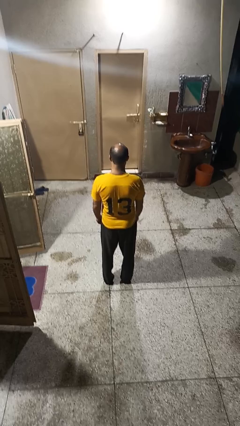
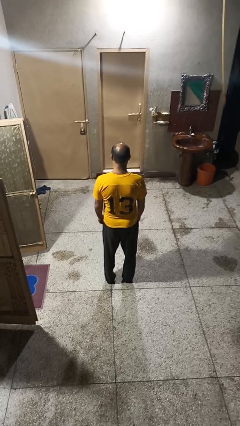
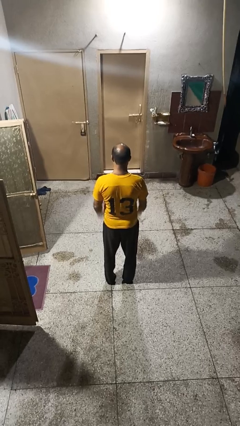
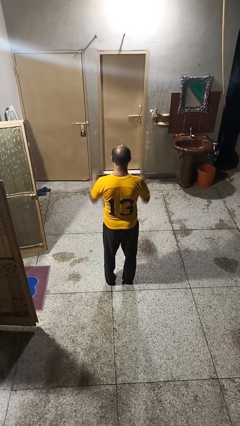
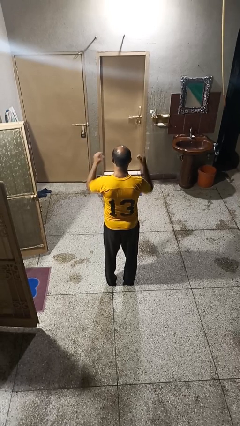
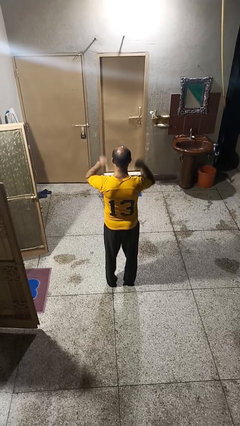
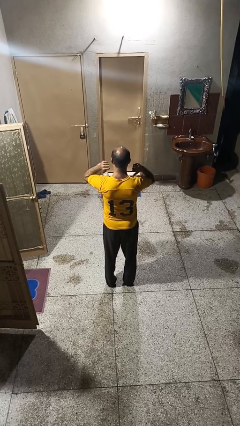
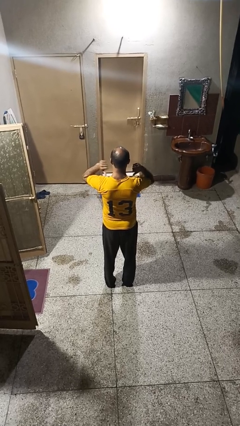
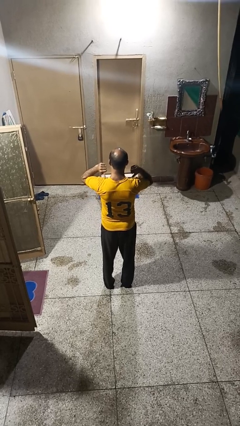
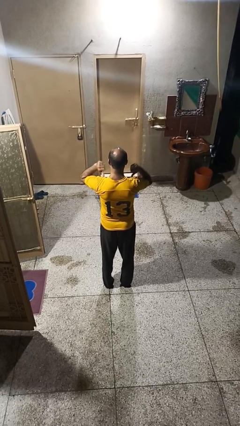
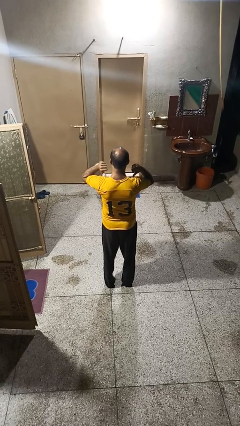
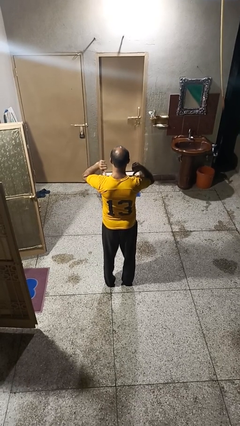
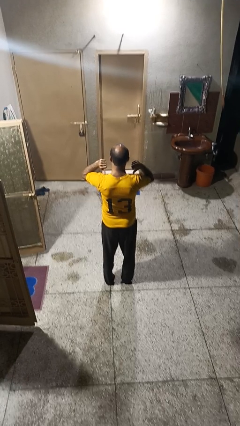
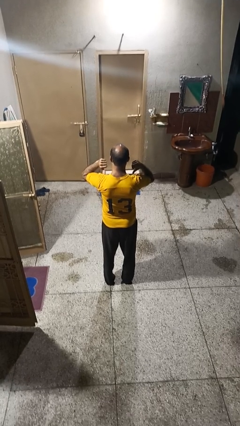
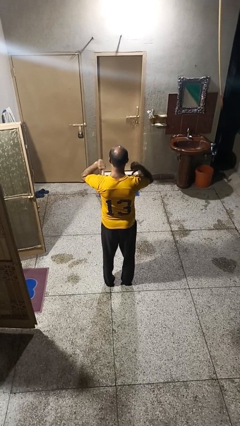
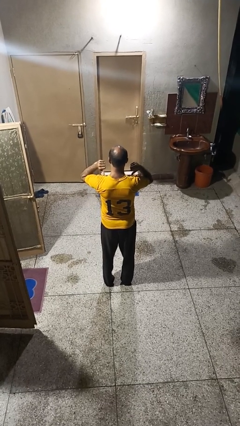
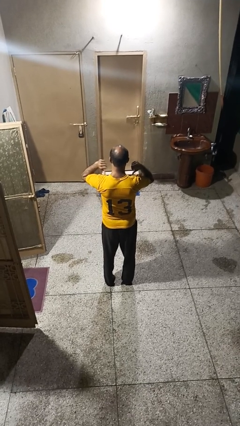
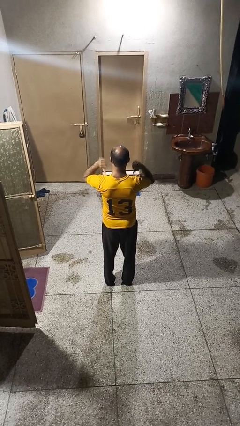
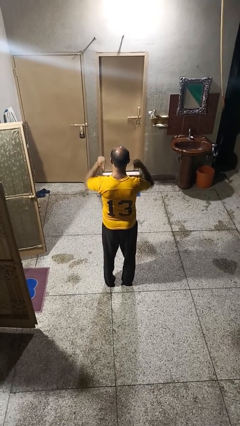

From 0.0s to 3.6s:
person gestures behind me

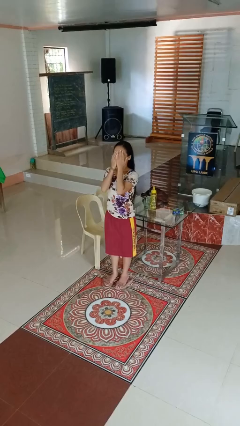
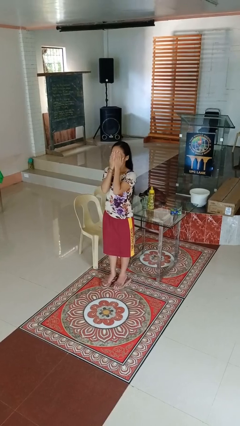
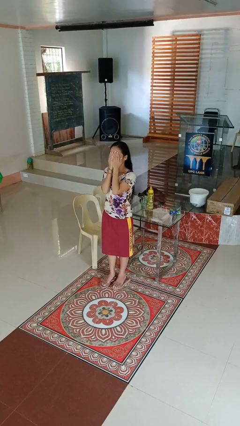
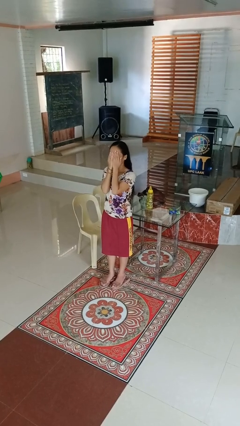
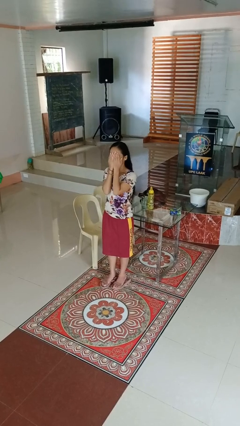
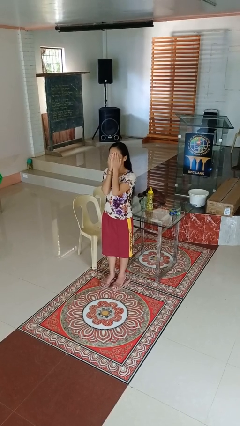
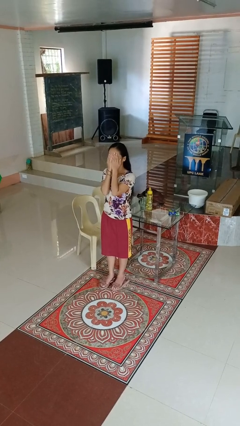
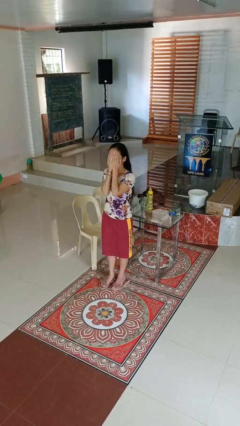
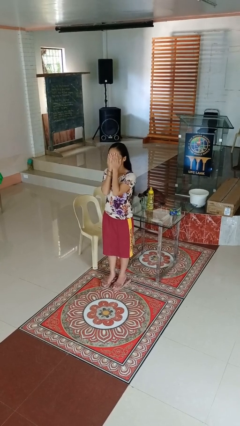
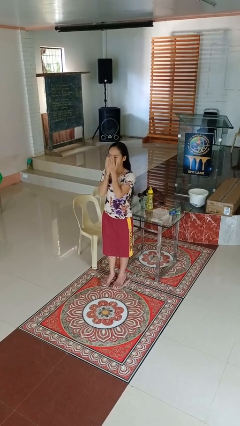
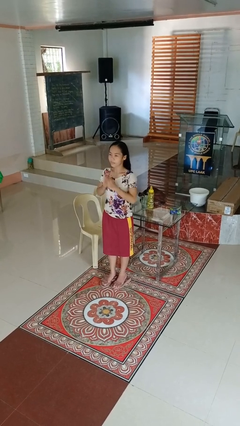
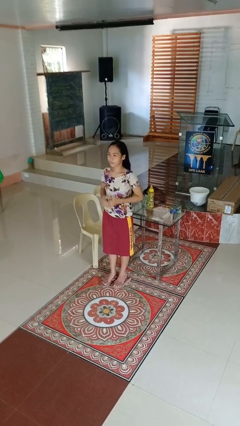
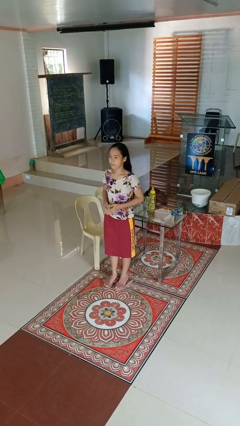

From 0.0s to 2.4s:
person covers face with hands

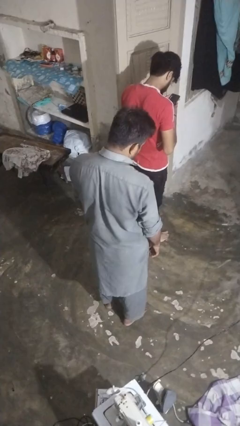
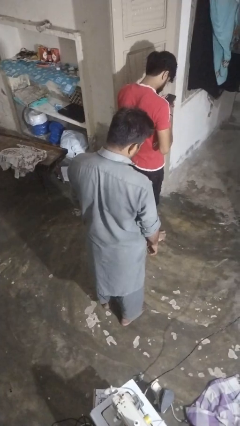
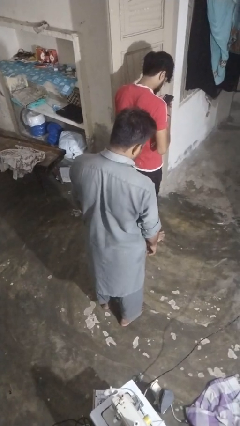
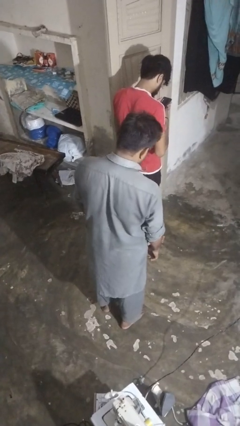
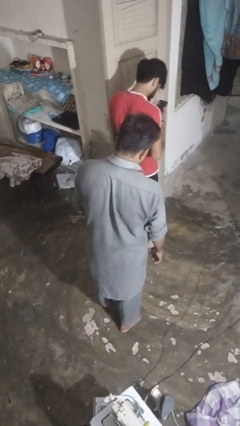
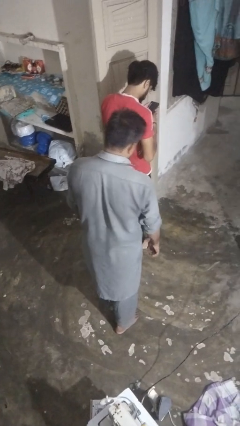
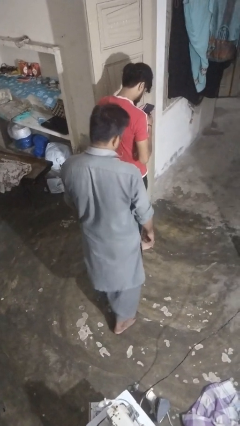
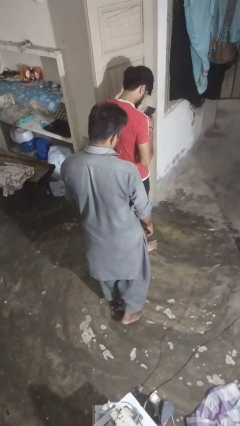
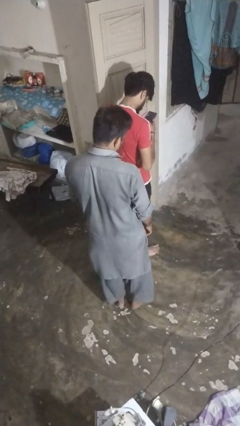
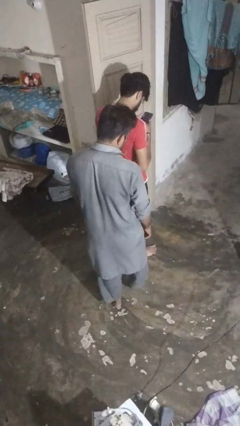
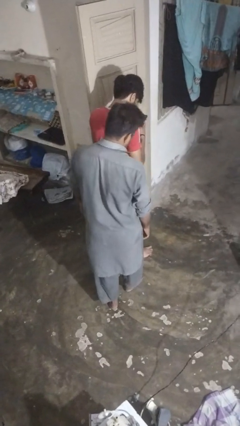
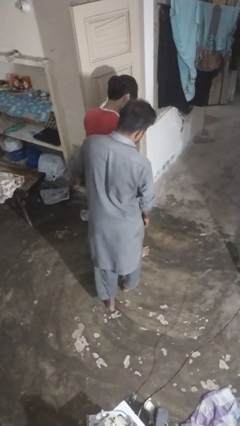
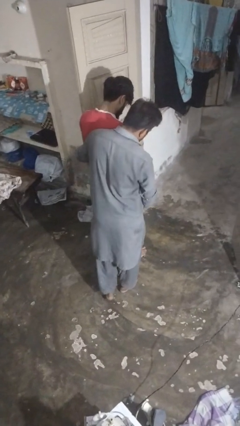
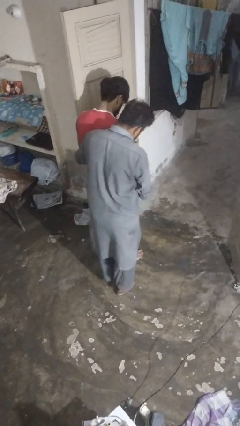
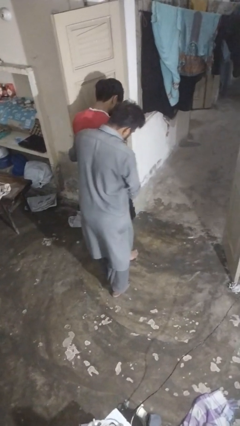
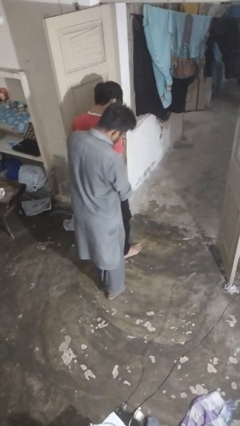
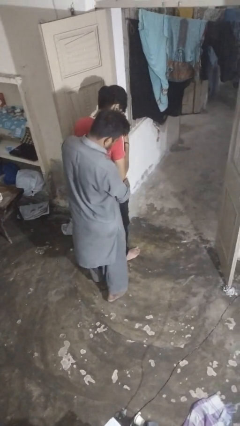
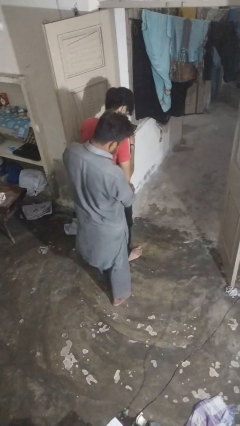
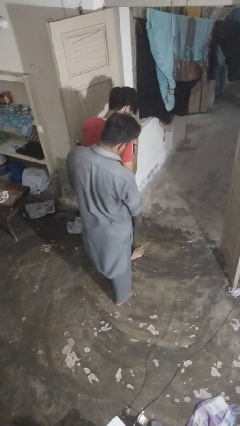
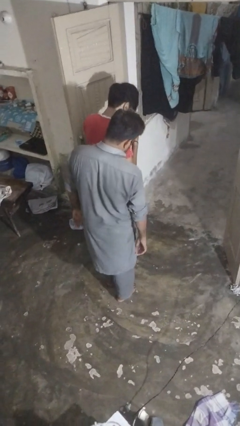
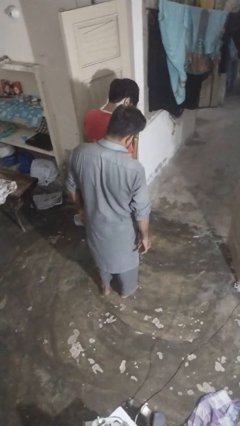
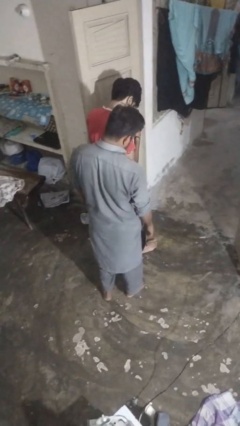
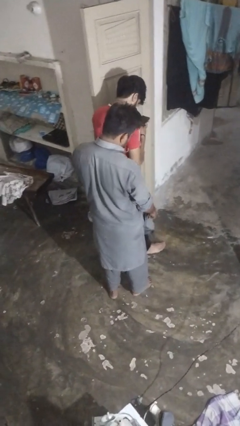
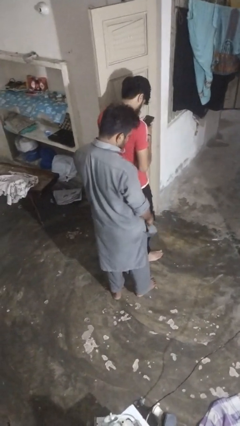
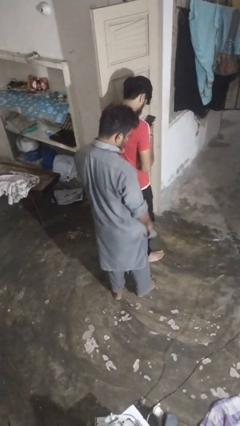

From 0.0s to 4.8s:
person bumps into person

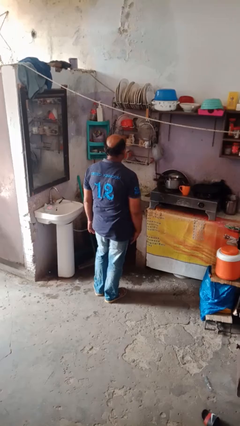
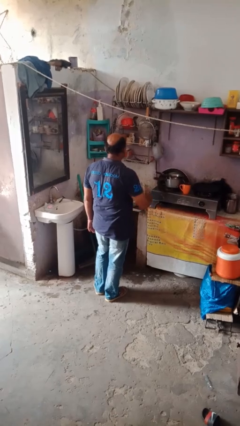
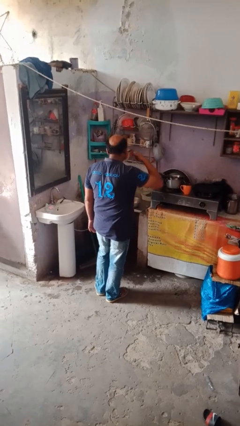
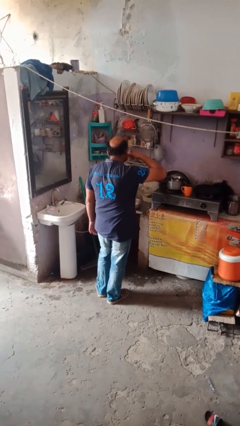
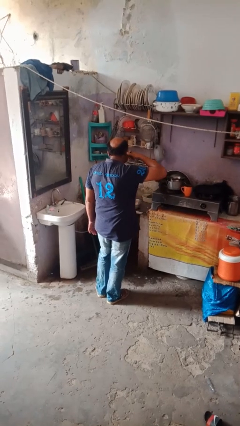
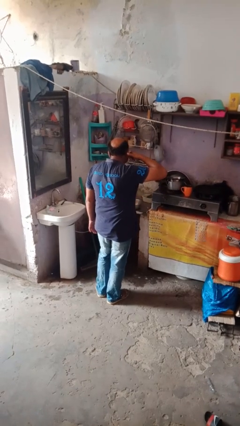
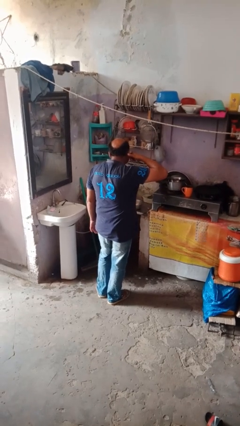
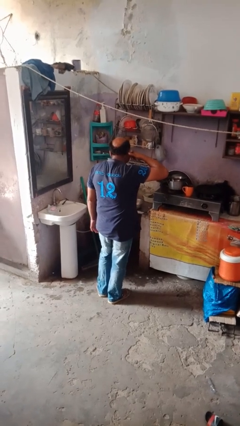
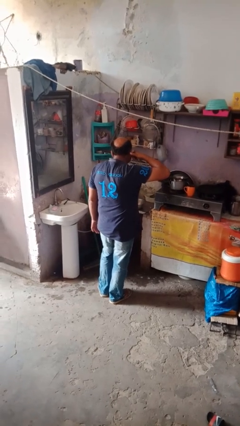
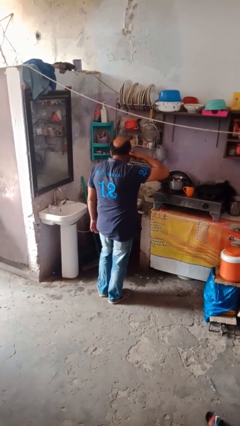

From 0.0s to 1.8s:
person gestures call me

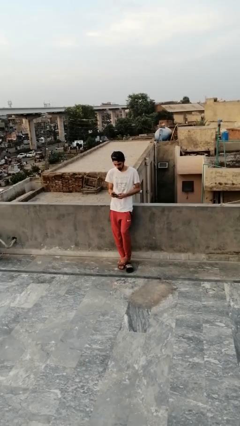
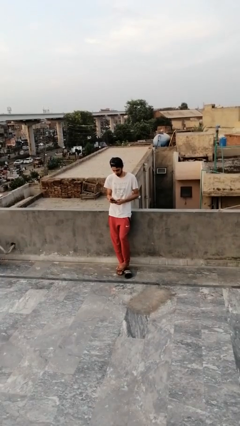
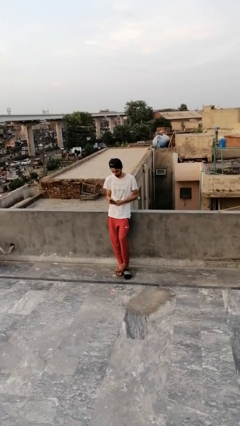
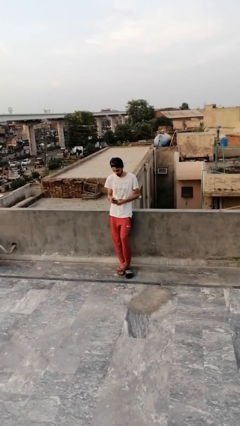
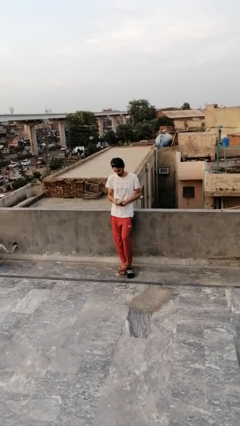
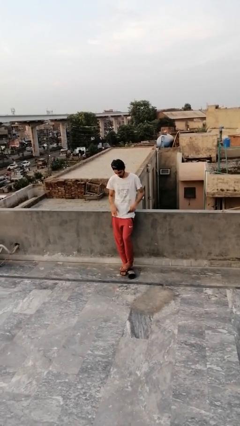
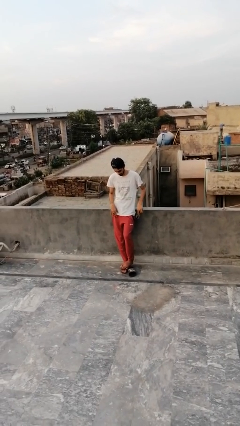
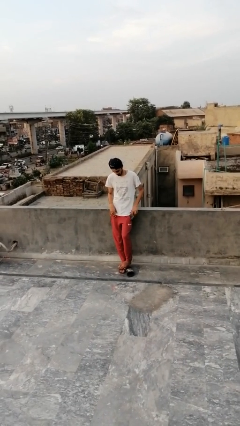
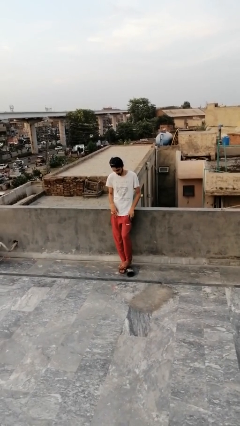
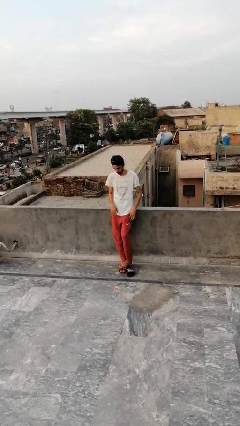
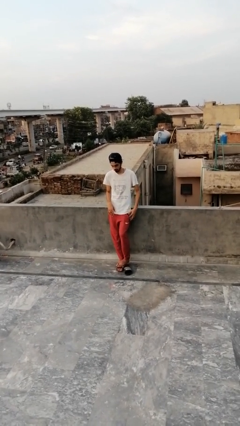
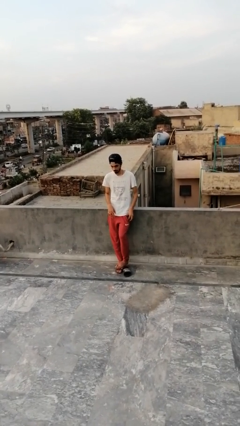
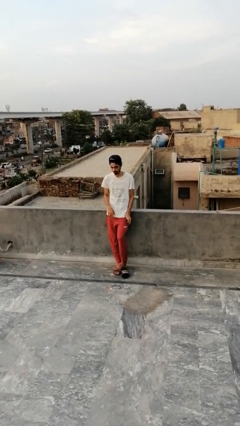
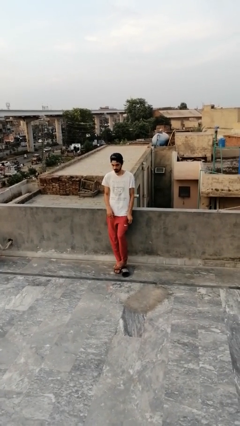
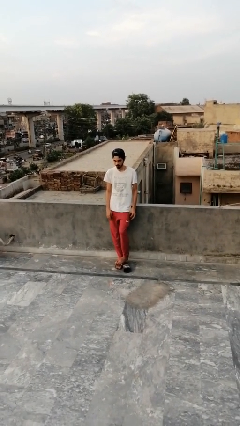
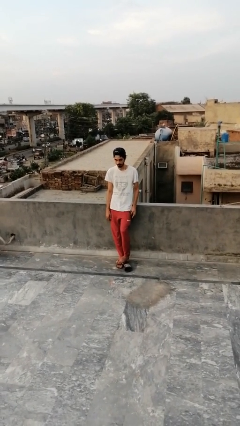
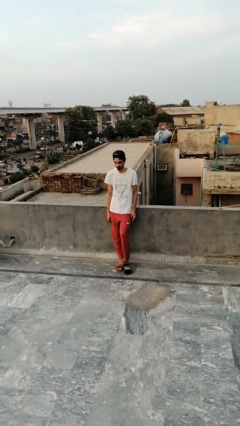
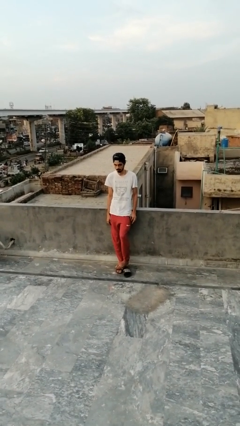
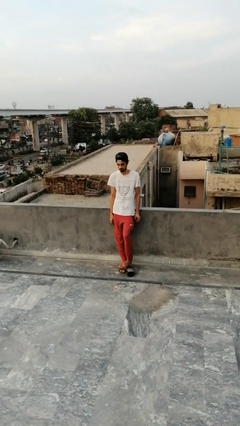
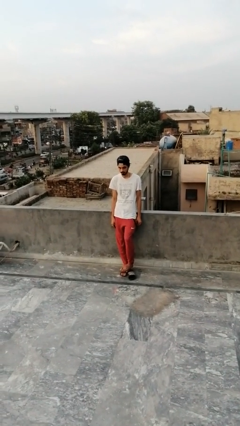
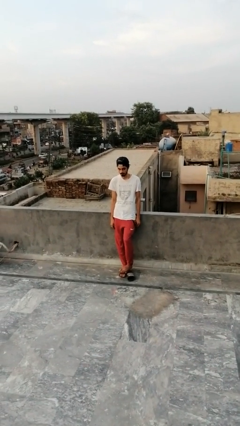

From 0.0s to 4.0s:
person puts phone into pocket

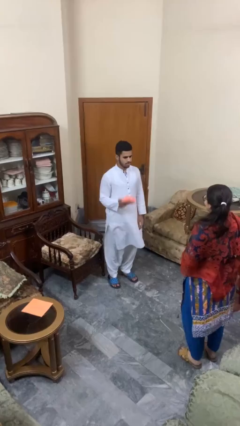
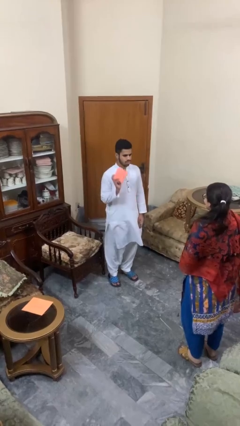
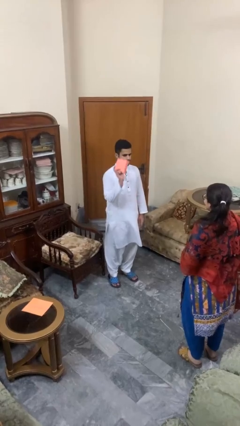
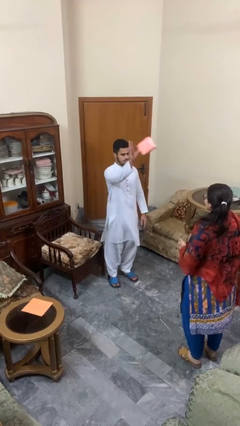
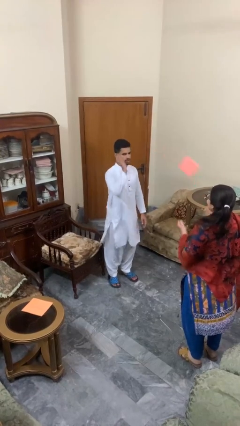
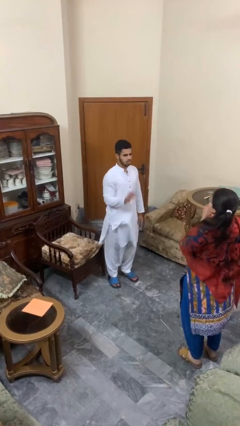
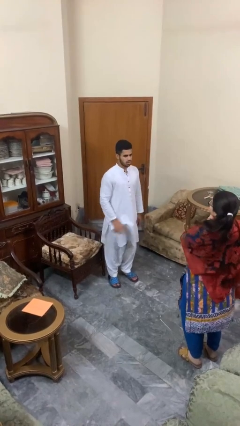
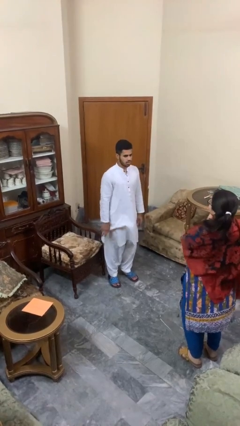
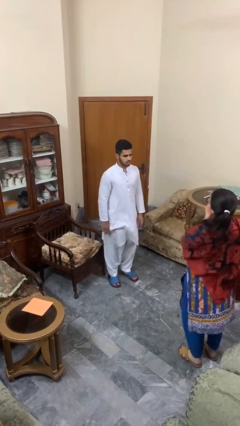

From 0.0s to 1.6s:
person throws object to person
